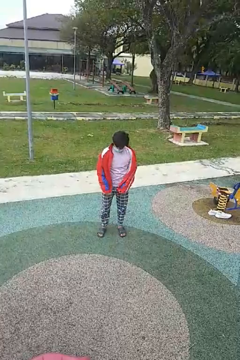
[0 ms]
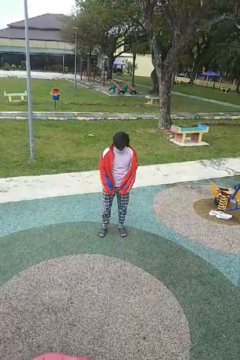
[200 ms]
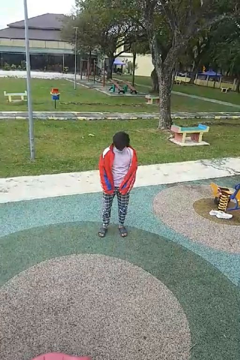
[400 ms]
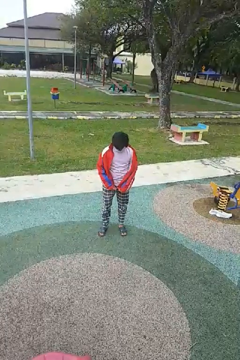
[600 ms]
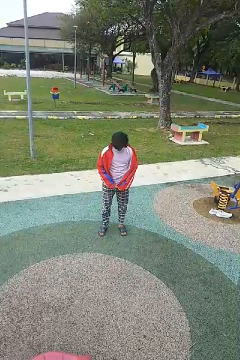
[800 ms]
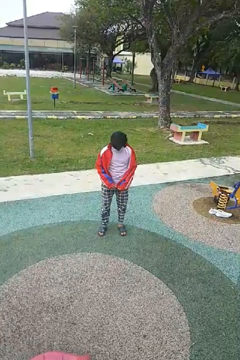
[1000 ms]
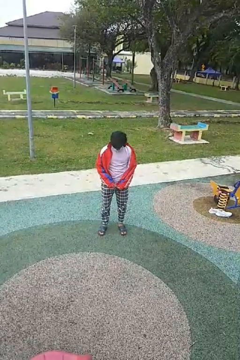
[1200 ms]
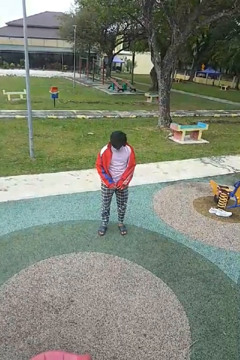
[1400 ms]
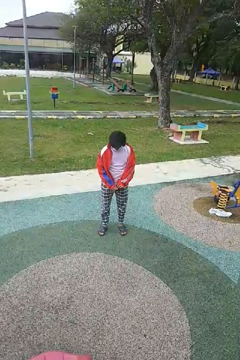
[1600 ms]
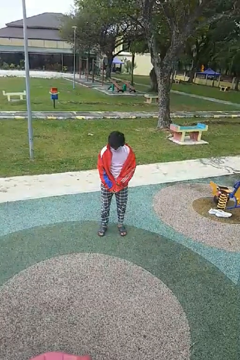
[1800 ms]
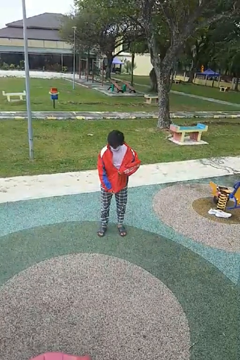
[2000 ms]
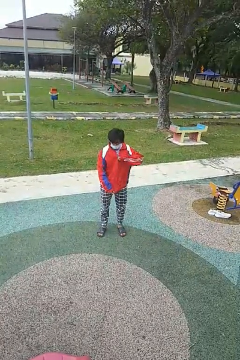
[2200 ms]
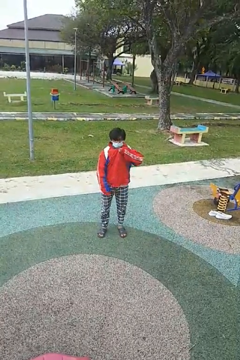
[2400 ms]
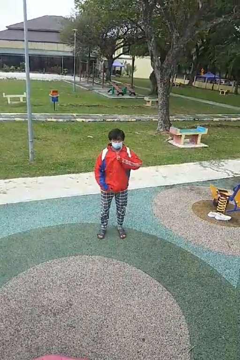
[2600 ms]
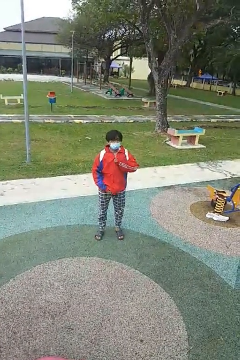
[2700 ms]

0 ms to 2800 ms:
person zips up jacket

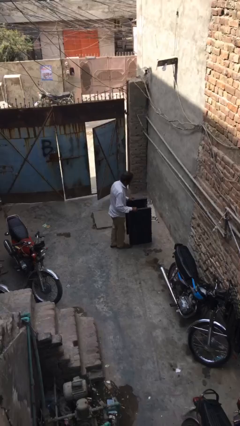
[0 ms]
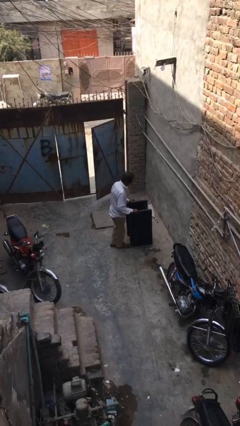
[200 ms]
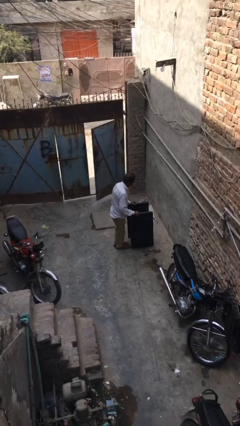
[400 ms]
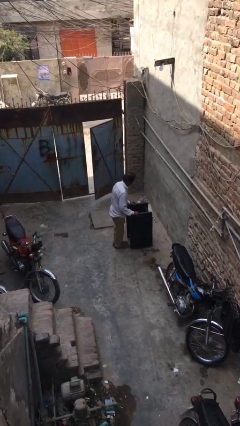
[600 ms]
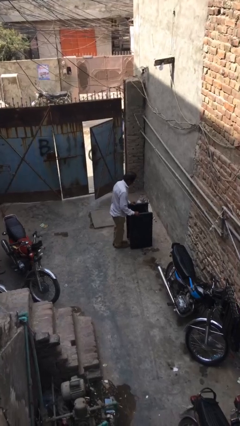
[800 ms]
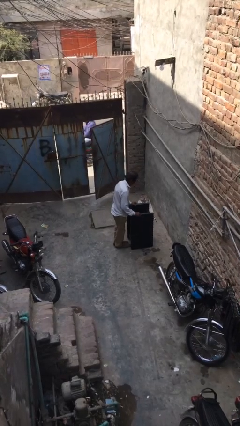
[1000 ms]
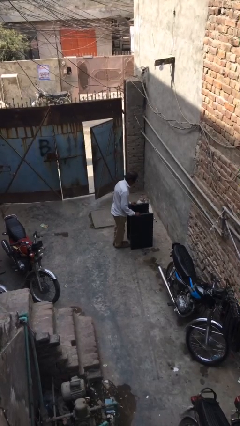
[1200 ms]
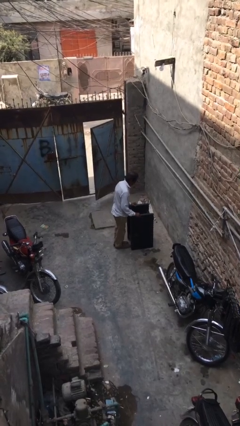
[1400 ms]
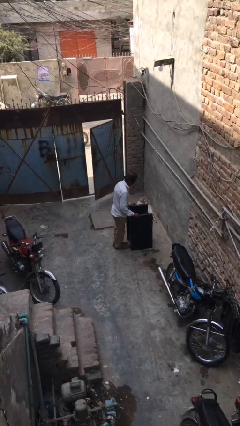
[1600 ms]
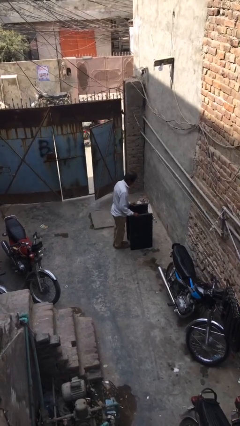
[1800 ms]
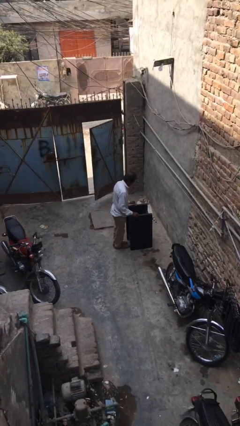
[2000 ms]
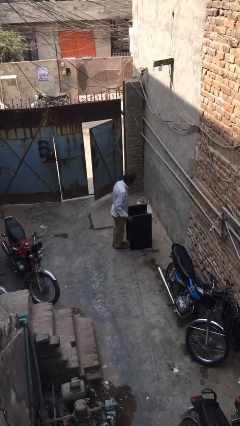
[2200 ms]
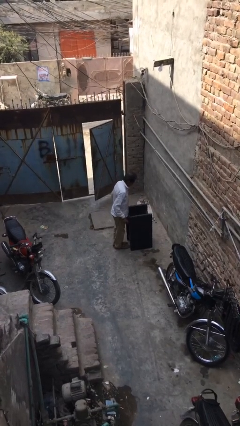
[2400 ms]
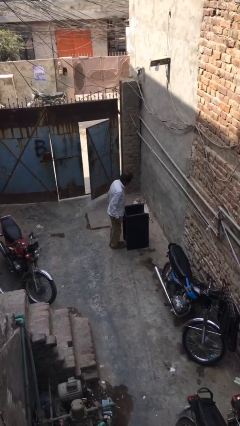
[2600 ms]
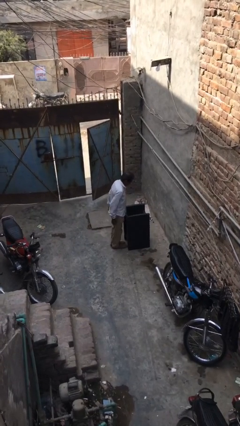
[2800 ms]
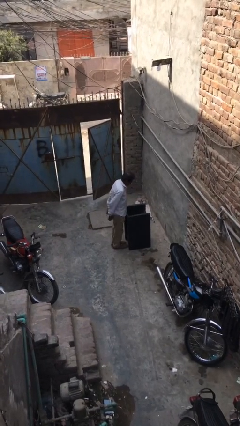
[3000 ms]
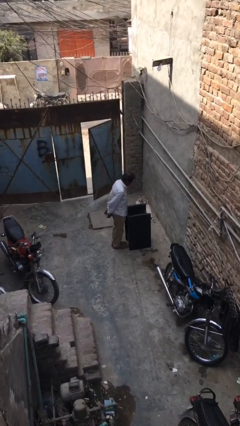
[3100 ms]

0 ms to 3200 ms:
person puts down object on floor

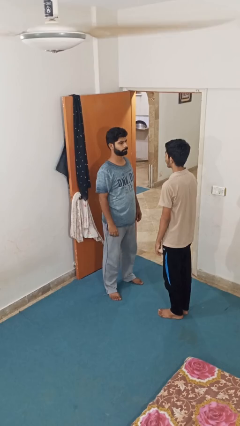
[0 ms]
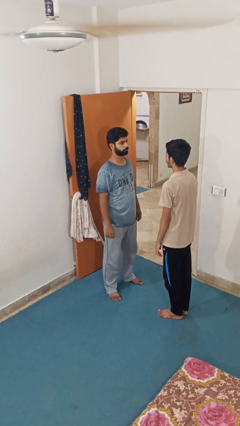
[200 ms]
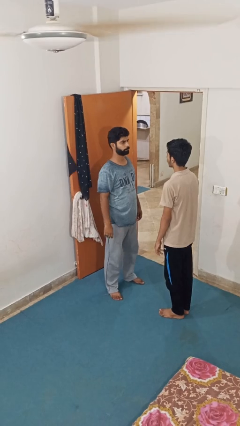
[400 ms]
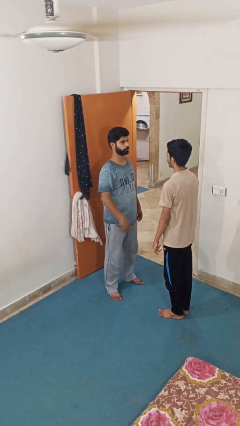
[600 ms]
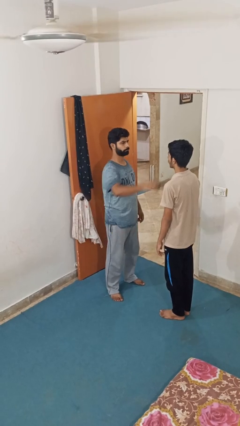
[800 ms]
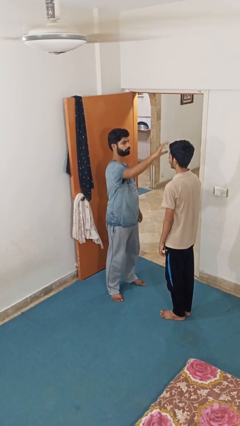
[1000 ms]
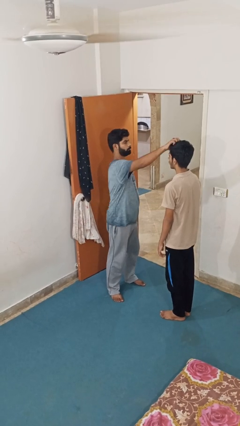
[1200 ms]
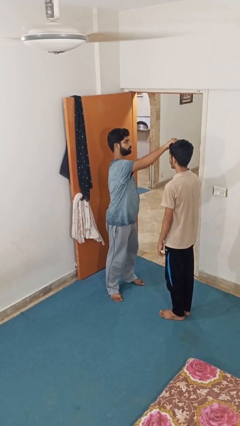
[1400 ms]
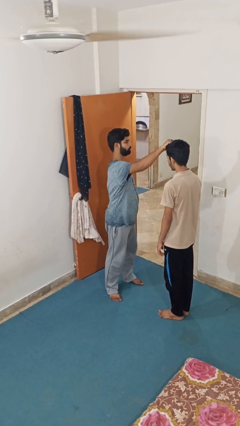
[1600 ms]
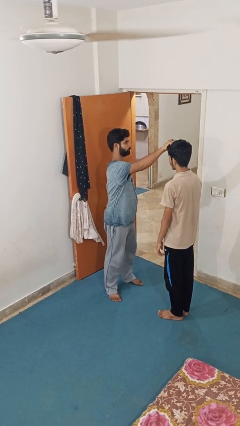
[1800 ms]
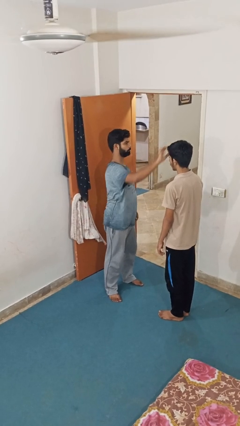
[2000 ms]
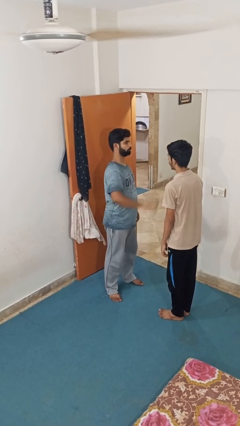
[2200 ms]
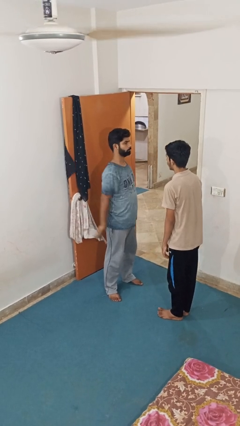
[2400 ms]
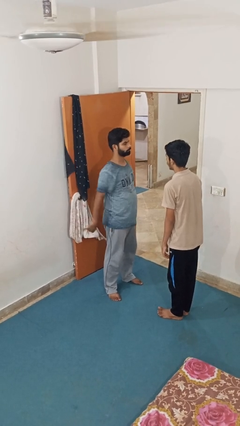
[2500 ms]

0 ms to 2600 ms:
person grabs person by hair

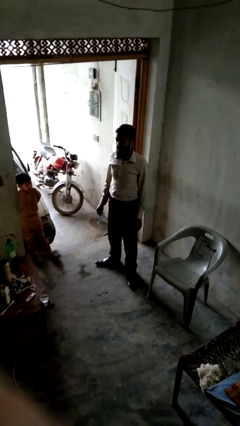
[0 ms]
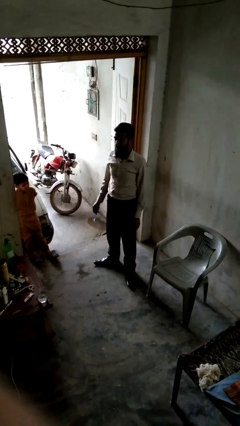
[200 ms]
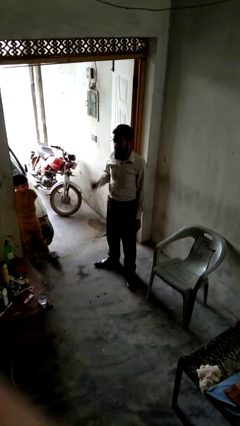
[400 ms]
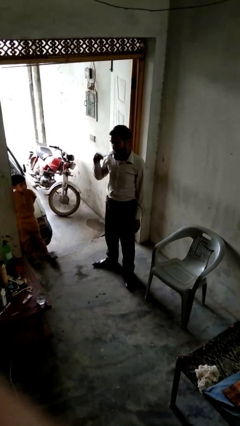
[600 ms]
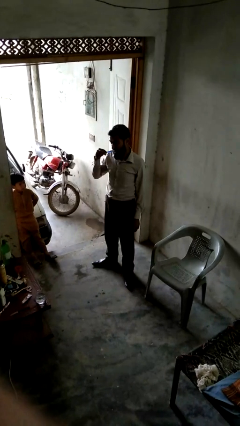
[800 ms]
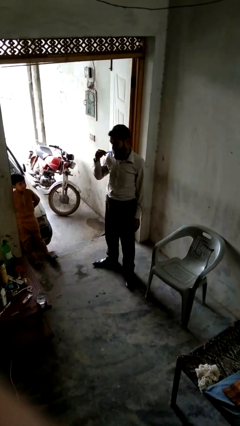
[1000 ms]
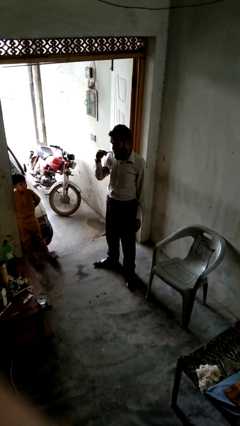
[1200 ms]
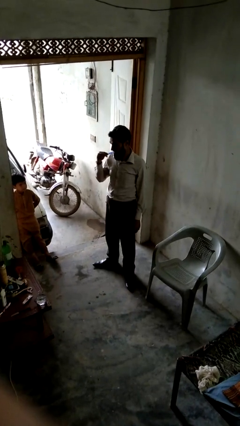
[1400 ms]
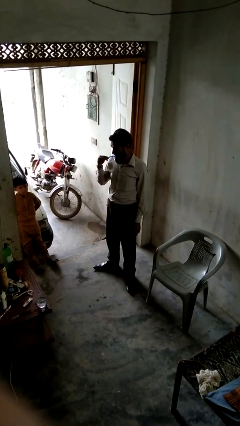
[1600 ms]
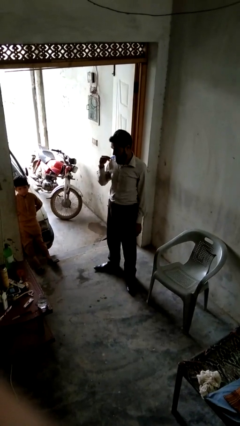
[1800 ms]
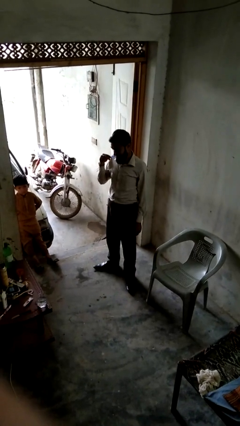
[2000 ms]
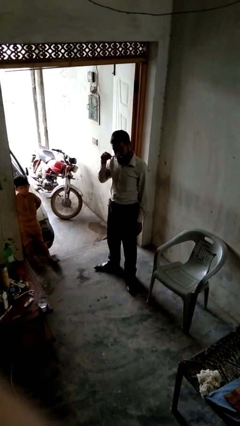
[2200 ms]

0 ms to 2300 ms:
person brushes teeth

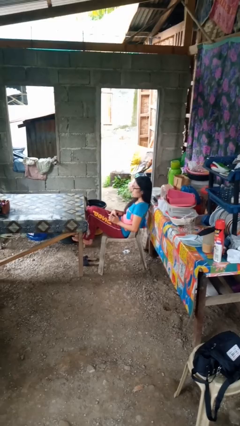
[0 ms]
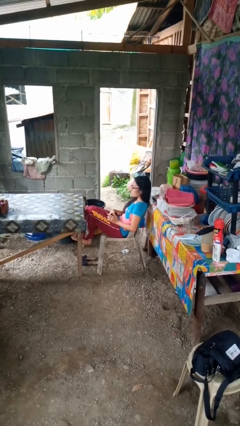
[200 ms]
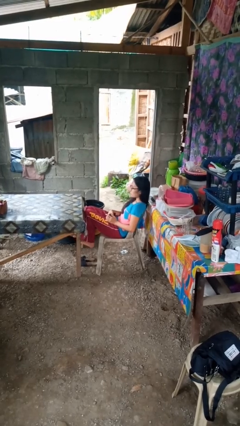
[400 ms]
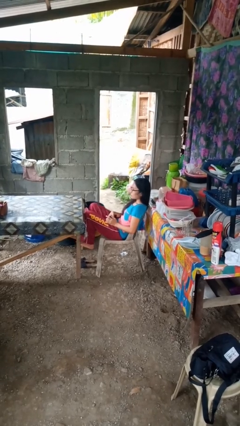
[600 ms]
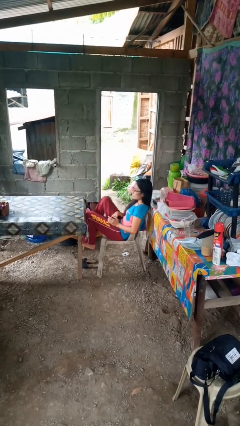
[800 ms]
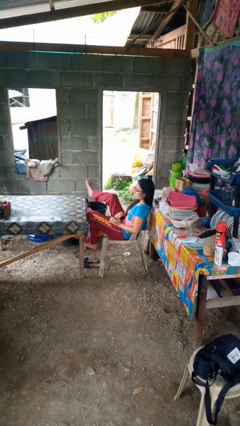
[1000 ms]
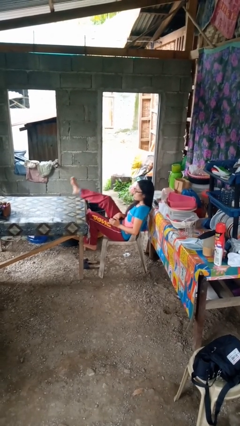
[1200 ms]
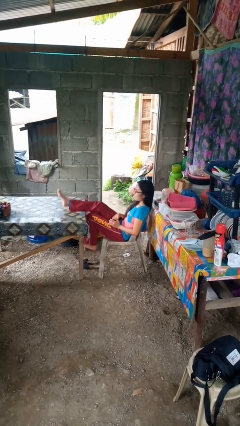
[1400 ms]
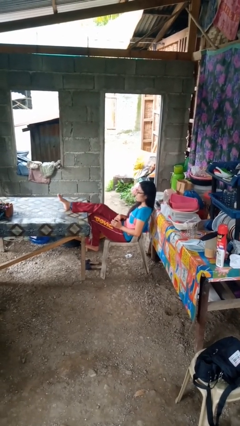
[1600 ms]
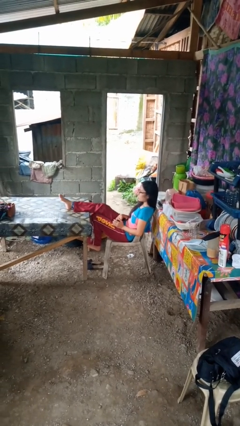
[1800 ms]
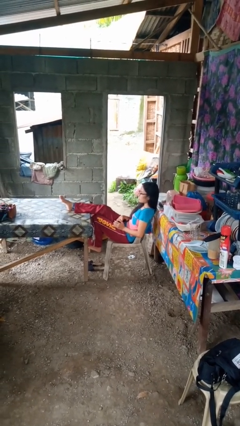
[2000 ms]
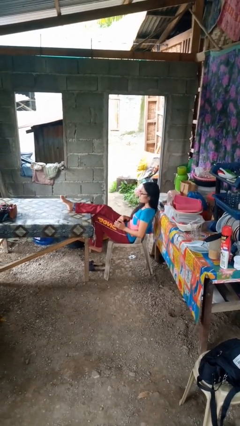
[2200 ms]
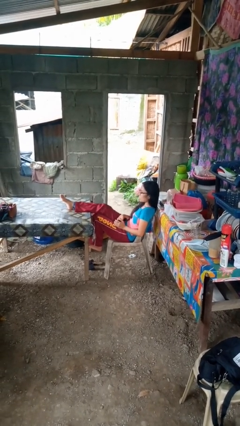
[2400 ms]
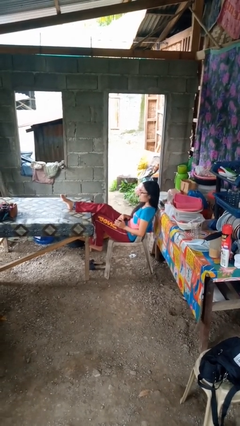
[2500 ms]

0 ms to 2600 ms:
person puts feet up

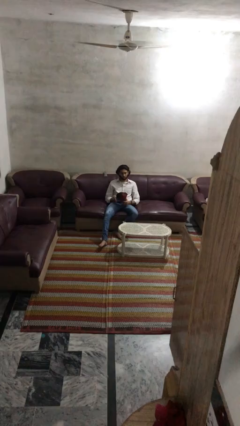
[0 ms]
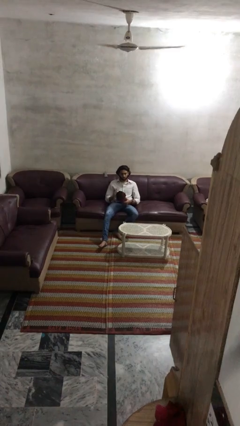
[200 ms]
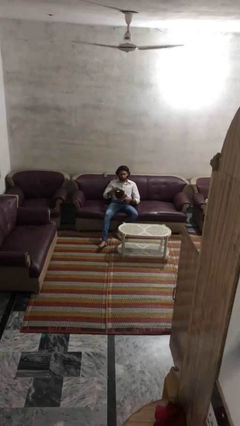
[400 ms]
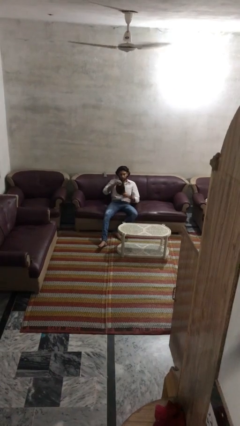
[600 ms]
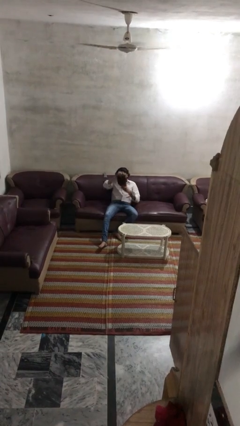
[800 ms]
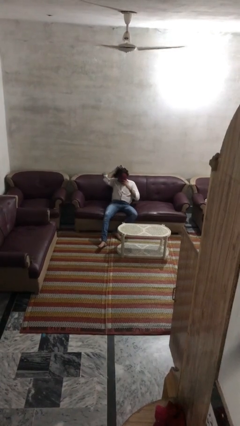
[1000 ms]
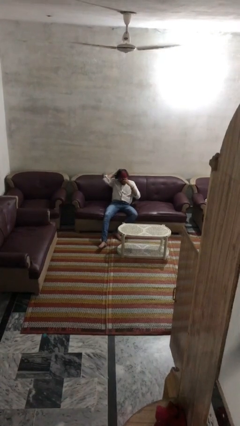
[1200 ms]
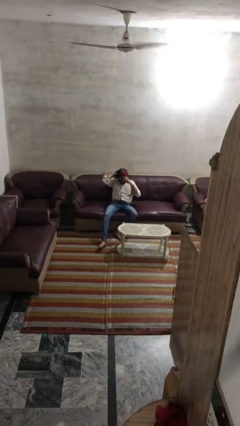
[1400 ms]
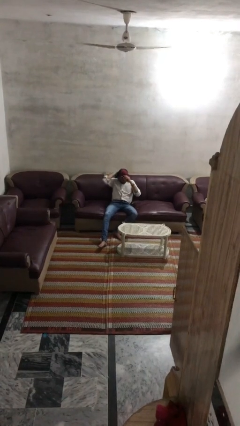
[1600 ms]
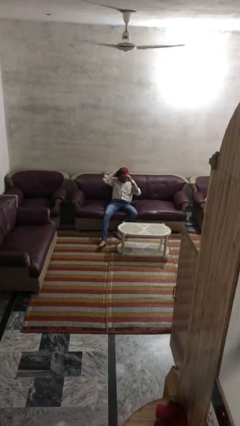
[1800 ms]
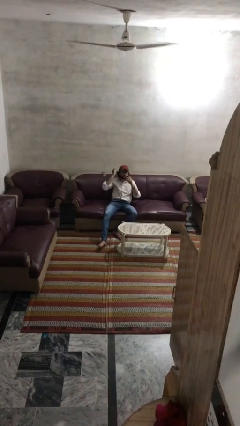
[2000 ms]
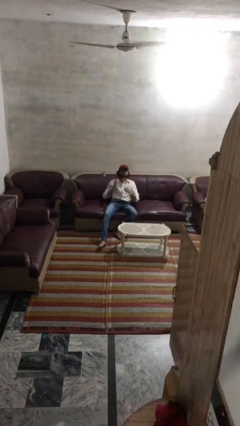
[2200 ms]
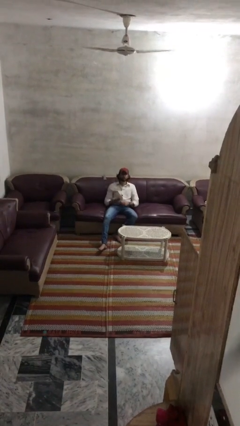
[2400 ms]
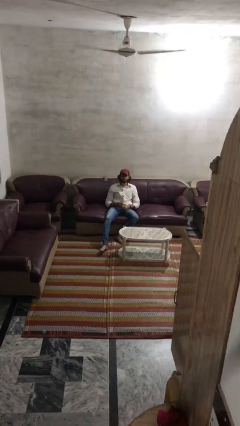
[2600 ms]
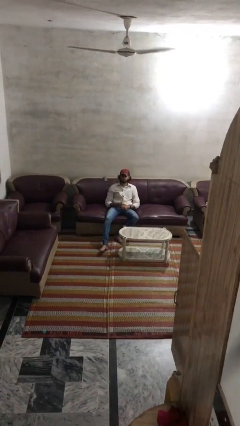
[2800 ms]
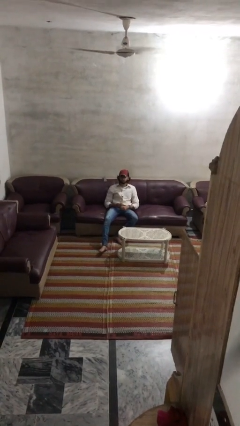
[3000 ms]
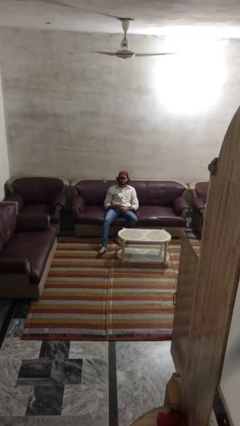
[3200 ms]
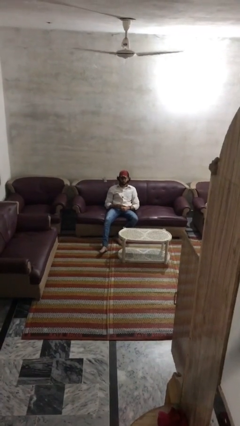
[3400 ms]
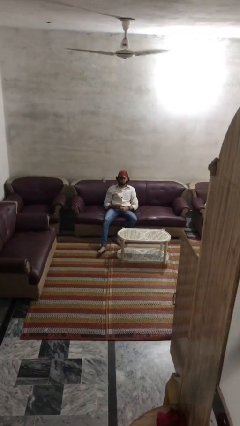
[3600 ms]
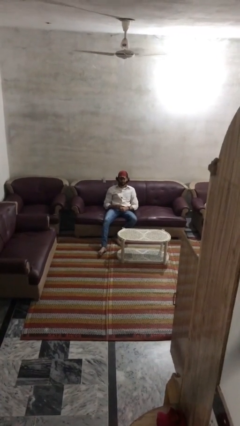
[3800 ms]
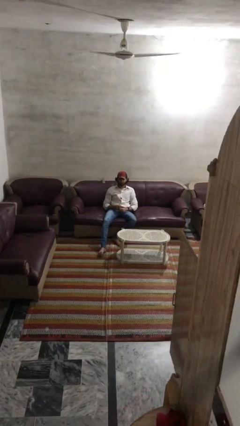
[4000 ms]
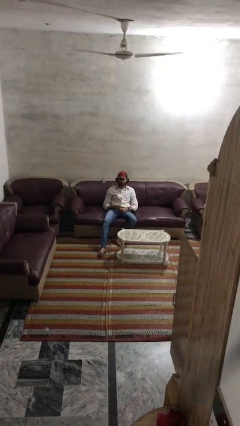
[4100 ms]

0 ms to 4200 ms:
person puts on hat

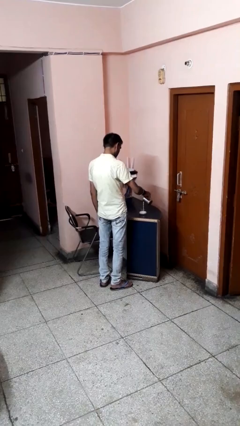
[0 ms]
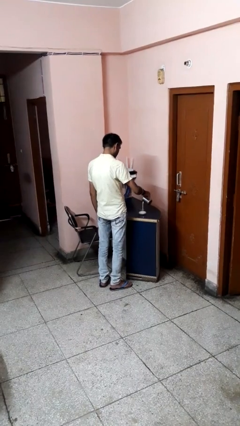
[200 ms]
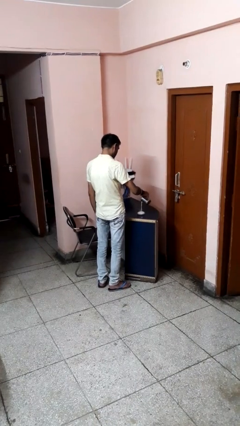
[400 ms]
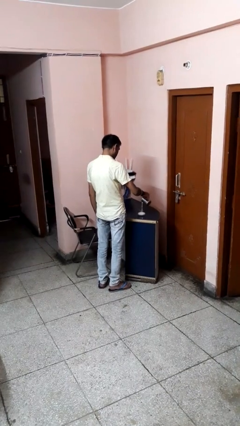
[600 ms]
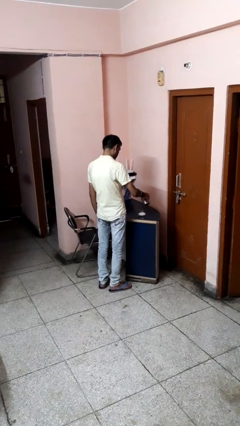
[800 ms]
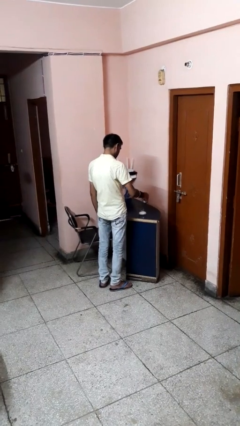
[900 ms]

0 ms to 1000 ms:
person pours into bowl
